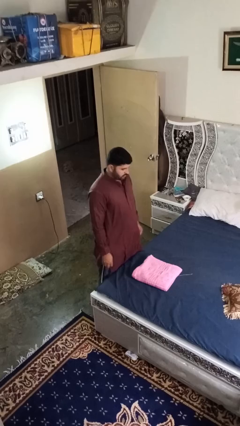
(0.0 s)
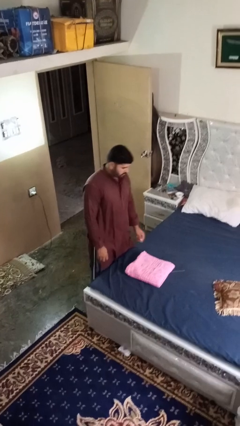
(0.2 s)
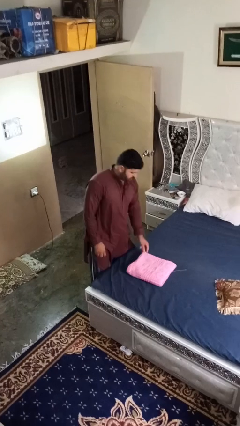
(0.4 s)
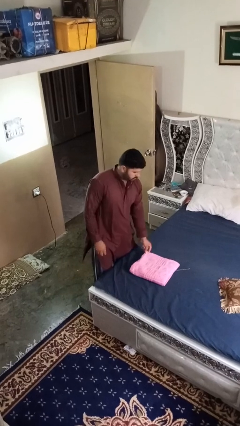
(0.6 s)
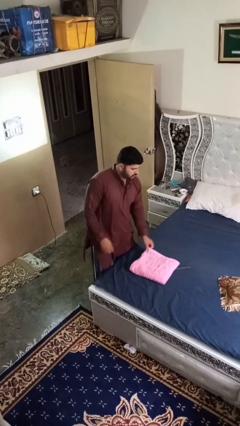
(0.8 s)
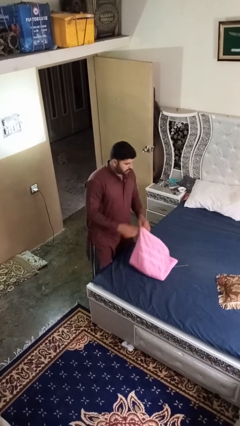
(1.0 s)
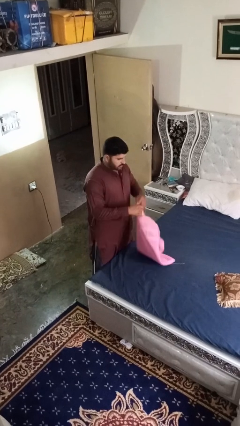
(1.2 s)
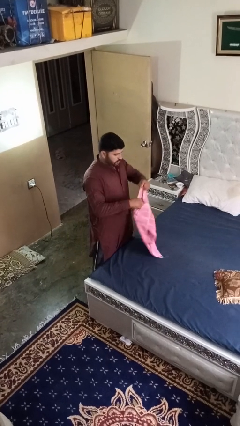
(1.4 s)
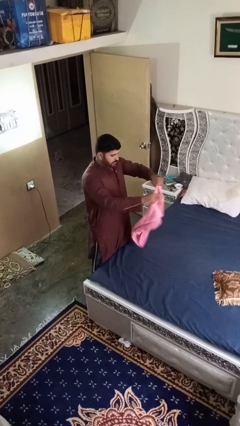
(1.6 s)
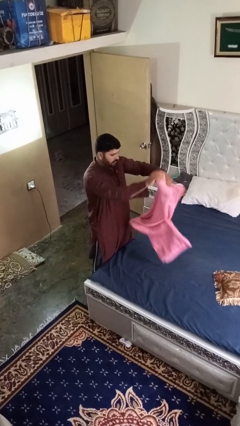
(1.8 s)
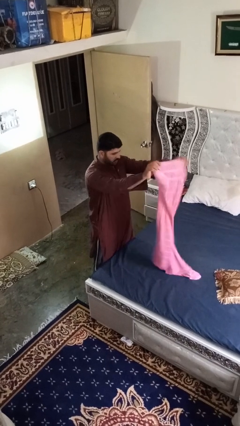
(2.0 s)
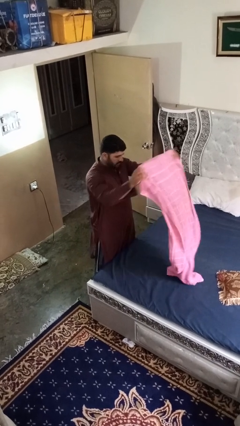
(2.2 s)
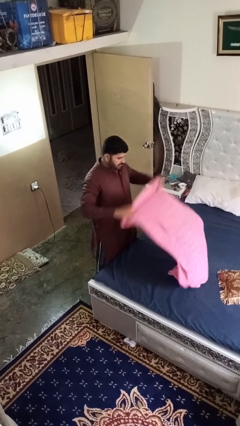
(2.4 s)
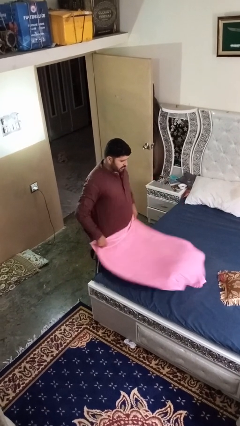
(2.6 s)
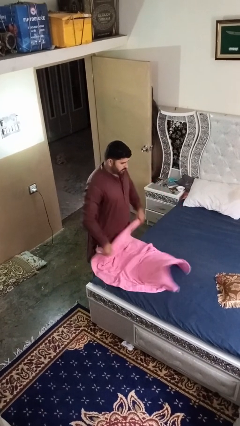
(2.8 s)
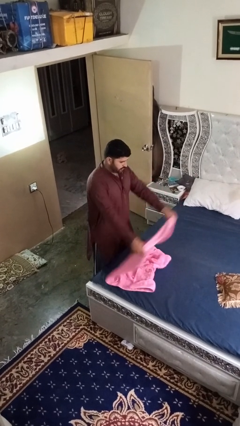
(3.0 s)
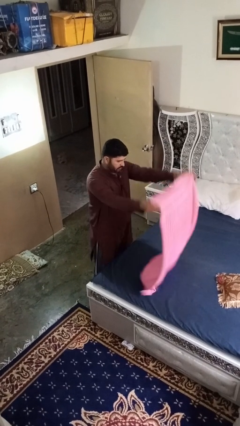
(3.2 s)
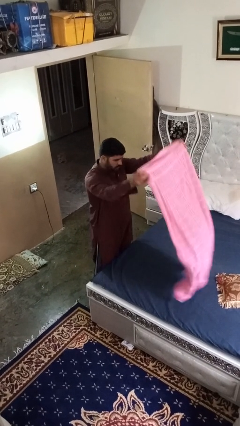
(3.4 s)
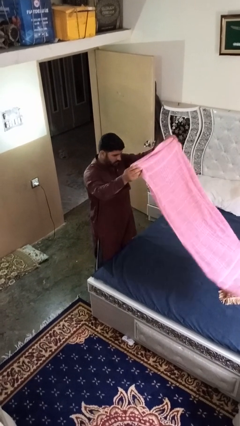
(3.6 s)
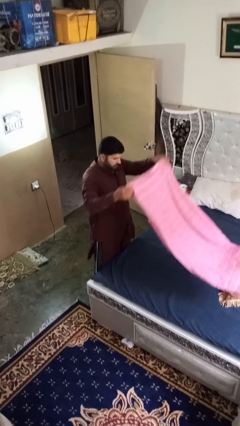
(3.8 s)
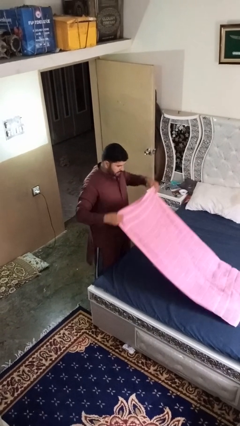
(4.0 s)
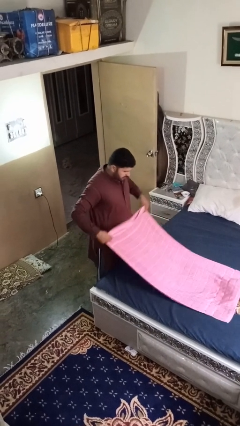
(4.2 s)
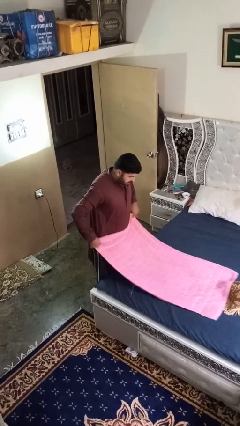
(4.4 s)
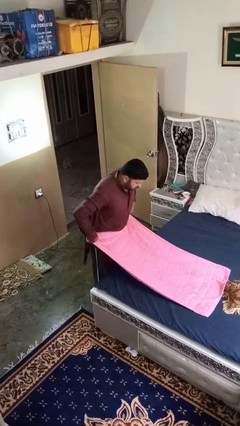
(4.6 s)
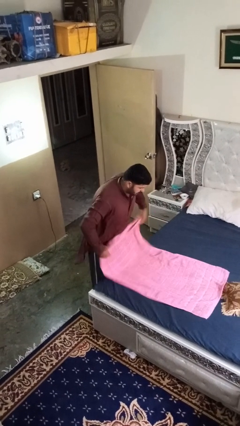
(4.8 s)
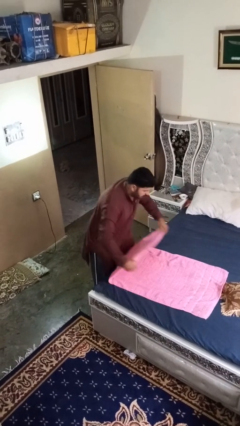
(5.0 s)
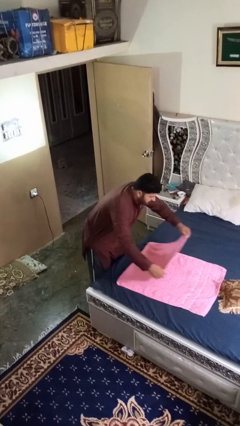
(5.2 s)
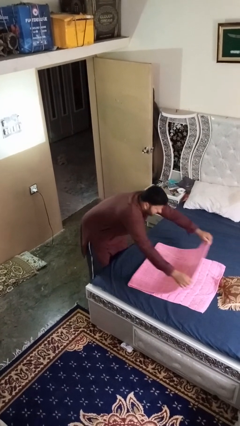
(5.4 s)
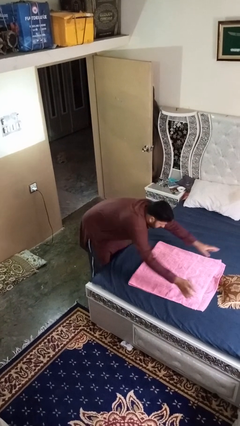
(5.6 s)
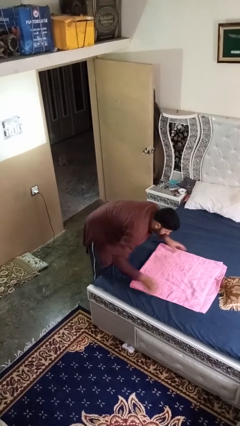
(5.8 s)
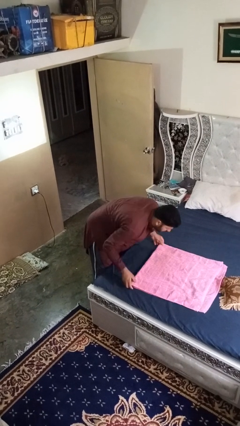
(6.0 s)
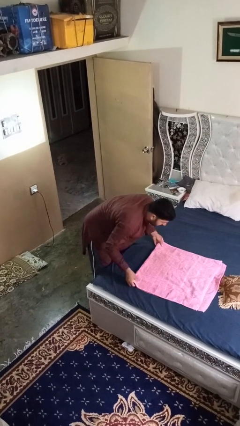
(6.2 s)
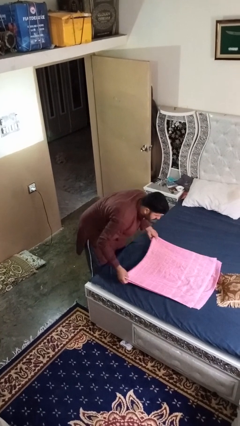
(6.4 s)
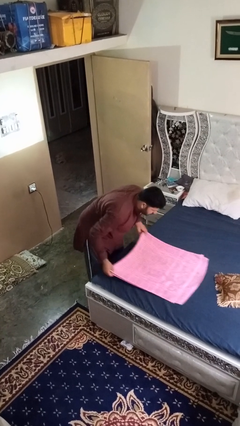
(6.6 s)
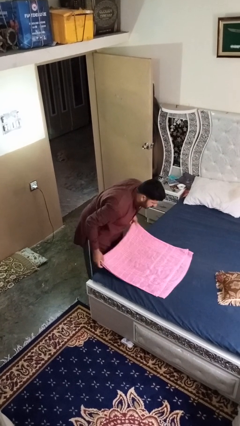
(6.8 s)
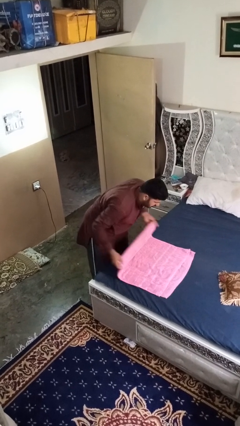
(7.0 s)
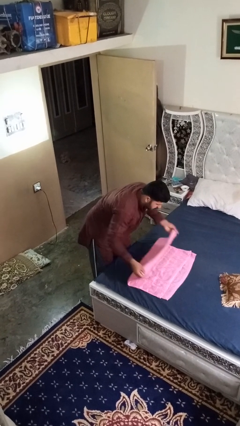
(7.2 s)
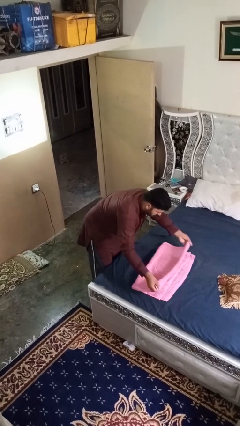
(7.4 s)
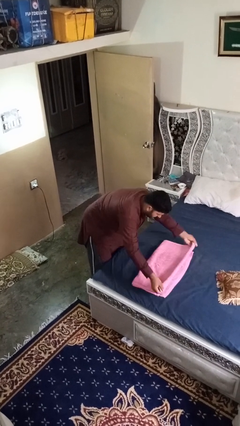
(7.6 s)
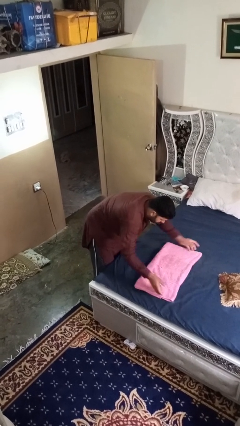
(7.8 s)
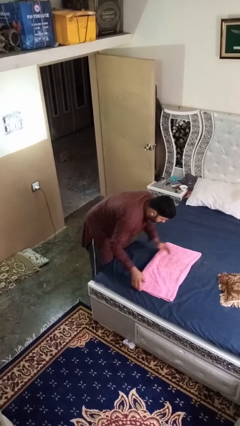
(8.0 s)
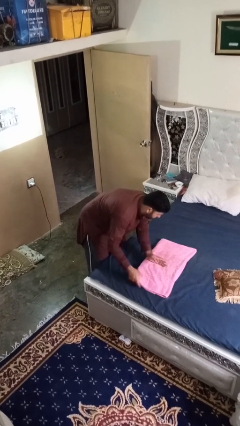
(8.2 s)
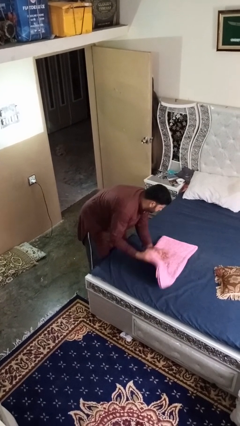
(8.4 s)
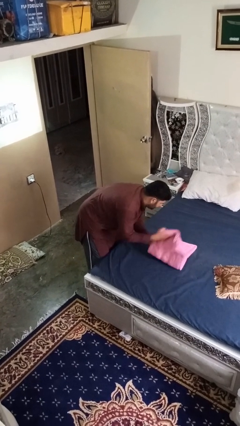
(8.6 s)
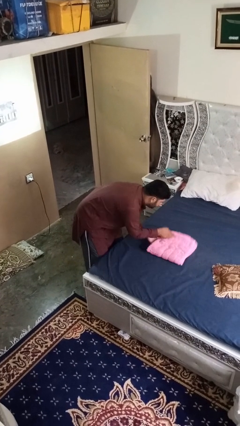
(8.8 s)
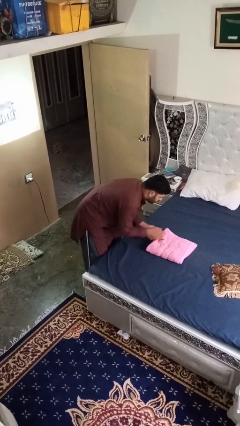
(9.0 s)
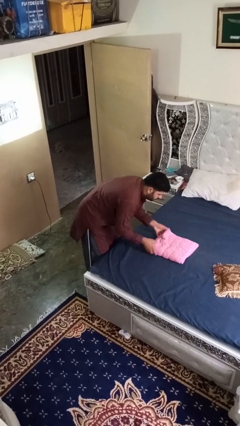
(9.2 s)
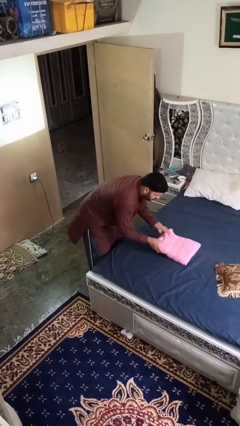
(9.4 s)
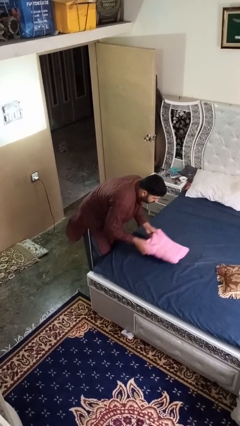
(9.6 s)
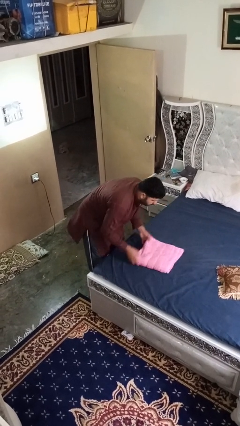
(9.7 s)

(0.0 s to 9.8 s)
person folds towel

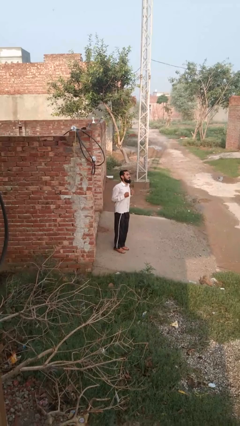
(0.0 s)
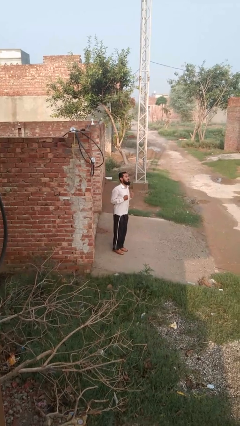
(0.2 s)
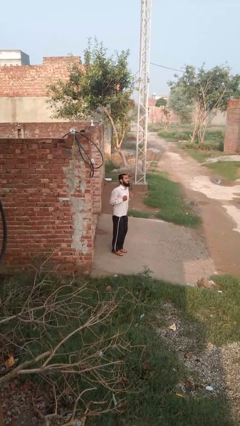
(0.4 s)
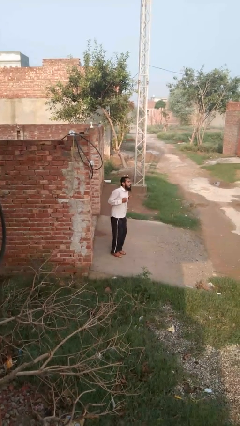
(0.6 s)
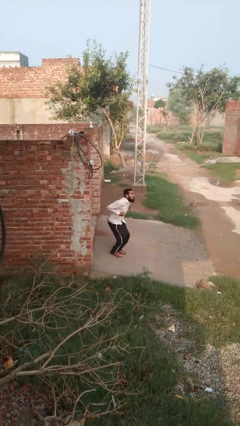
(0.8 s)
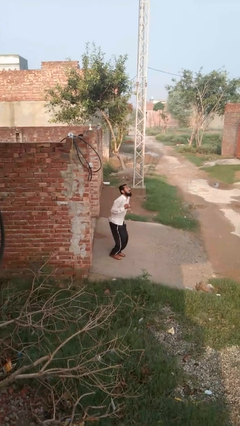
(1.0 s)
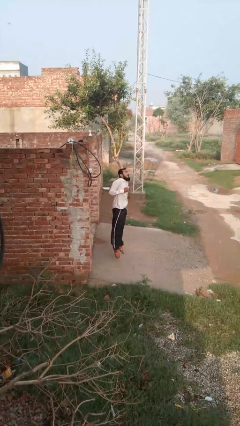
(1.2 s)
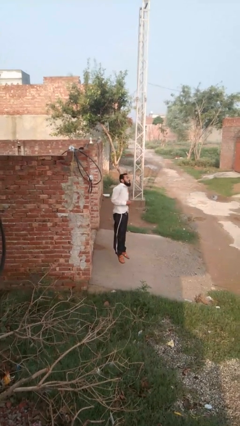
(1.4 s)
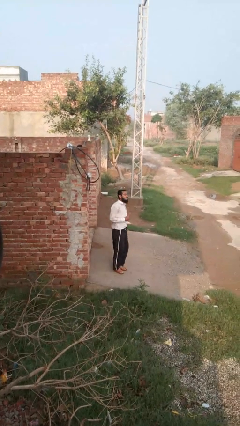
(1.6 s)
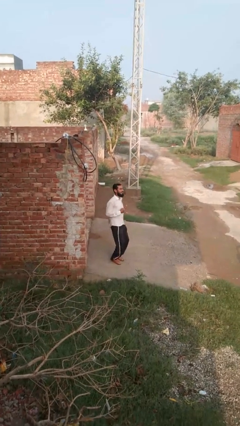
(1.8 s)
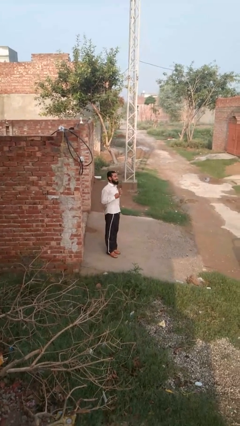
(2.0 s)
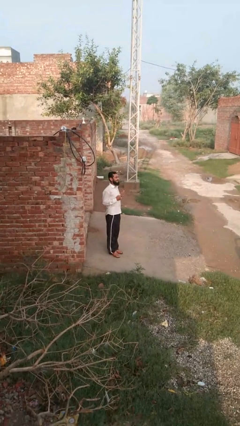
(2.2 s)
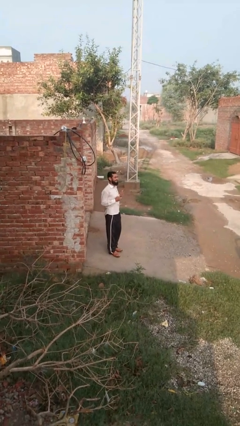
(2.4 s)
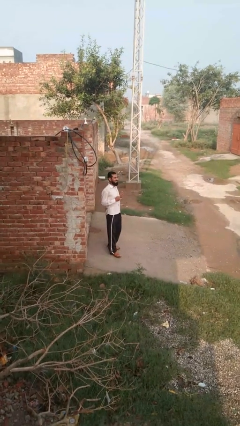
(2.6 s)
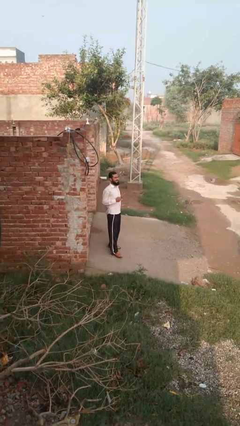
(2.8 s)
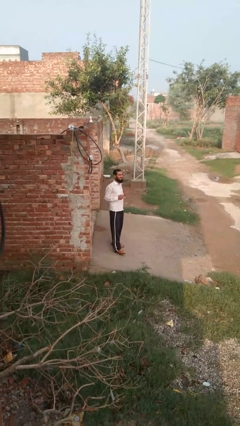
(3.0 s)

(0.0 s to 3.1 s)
person jumps

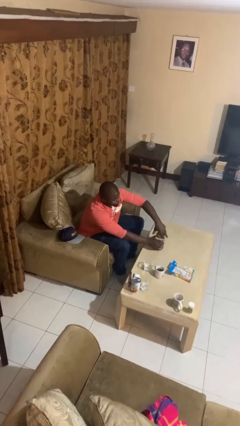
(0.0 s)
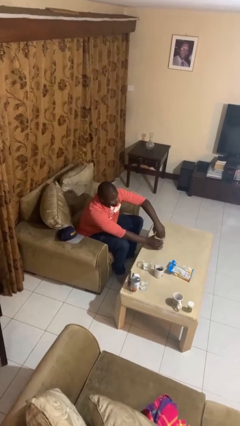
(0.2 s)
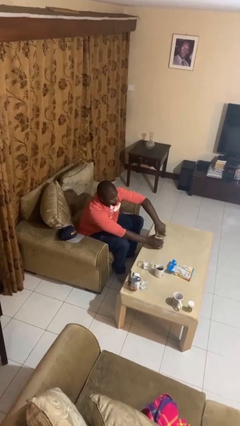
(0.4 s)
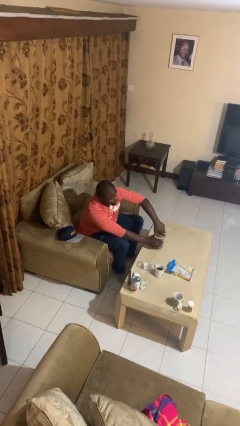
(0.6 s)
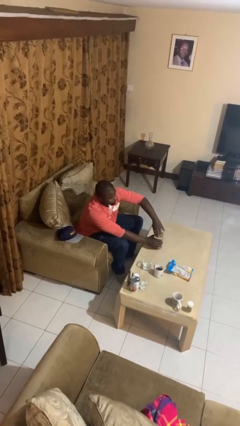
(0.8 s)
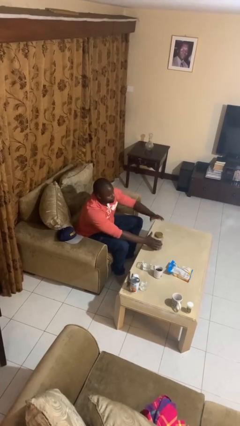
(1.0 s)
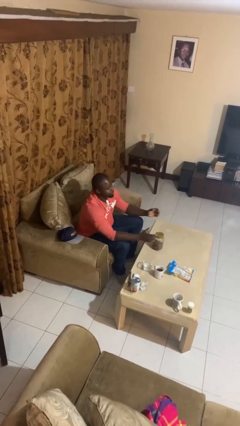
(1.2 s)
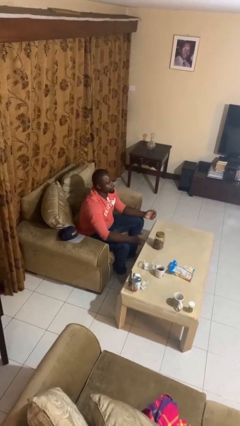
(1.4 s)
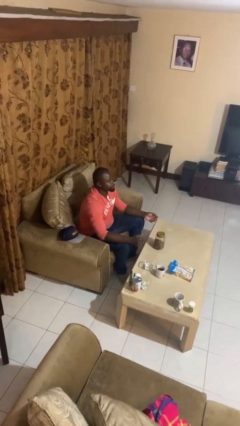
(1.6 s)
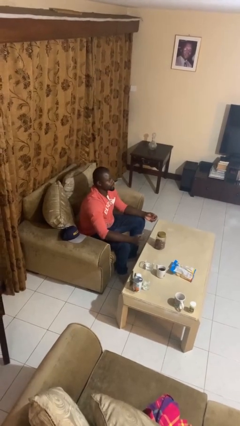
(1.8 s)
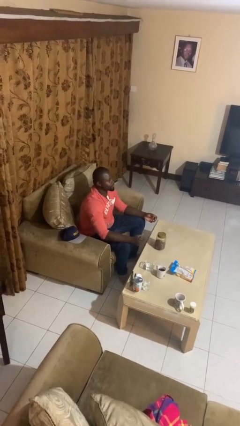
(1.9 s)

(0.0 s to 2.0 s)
person closes jar

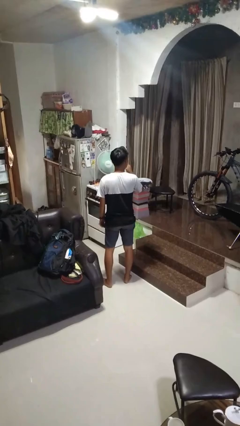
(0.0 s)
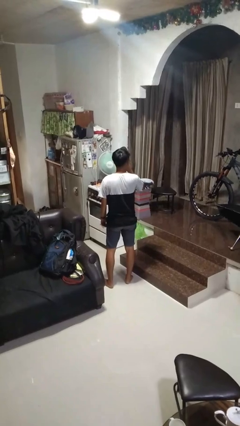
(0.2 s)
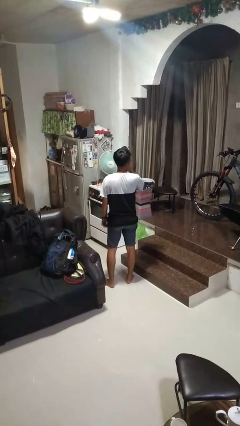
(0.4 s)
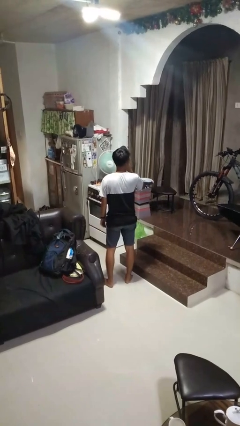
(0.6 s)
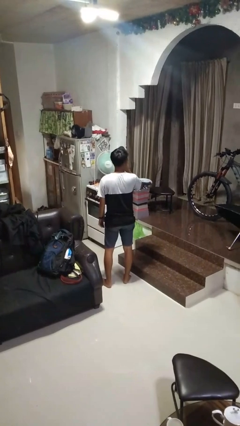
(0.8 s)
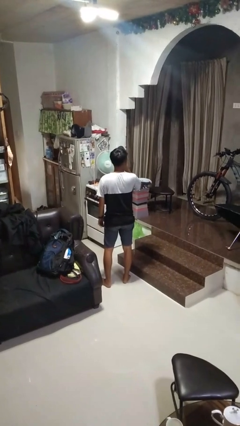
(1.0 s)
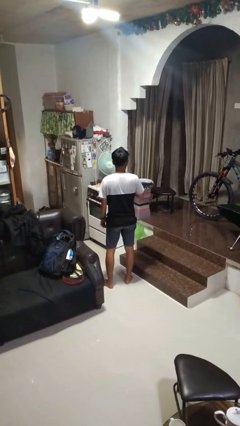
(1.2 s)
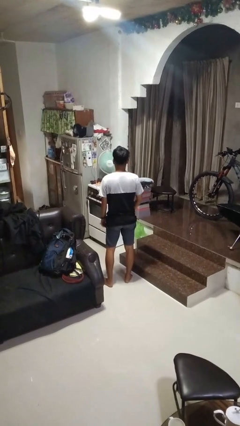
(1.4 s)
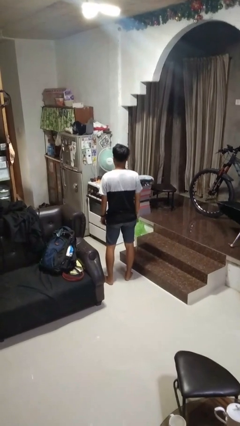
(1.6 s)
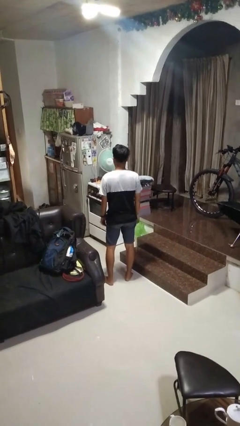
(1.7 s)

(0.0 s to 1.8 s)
person gestures be quiet

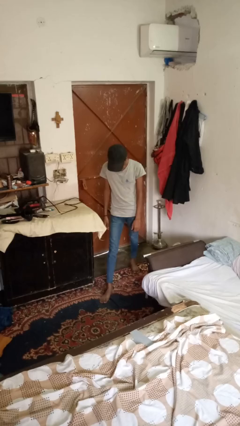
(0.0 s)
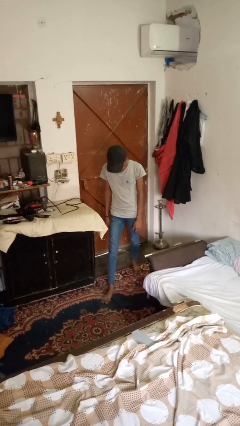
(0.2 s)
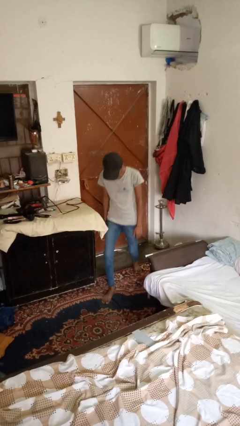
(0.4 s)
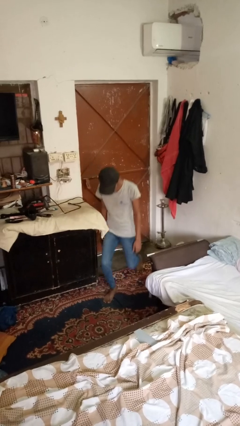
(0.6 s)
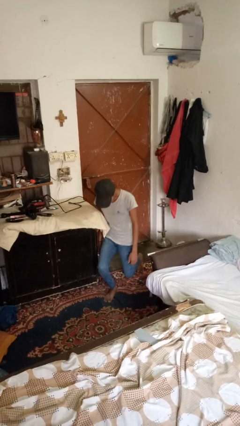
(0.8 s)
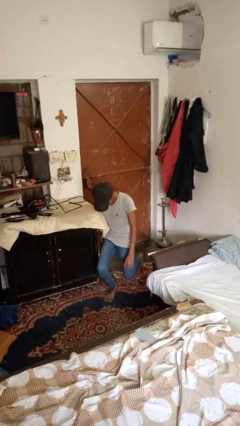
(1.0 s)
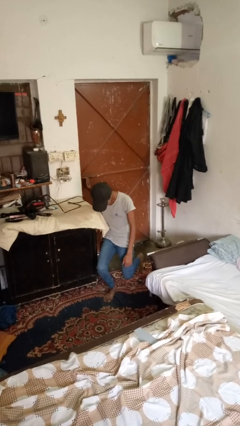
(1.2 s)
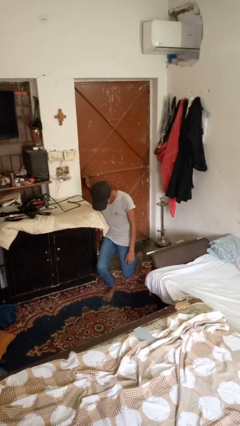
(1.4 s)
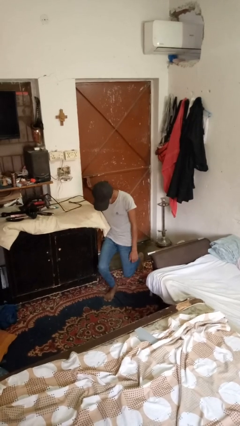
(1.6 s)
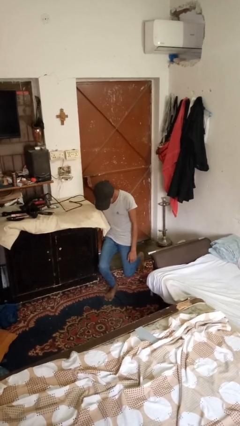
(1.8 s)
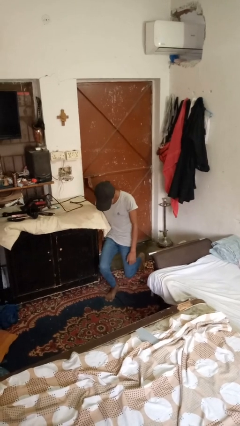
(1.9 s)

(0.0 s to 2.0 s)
person exercises with lunges
